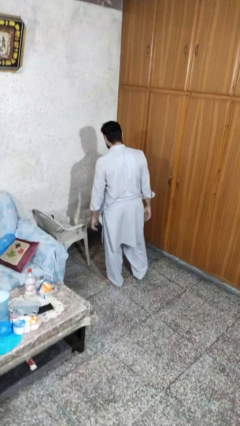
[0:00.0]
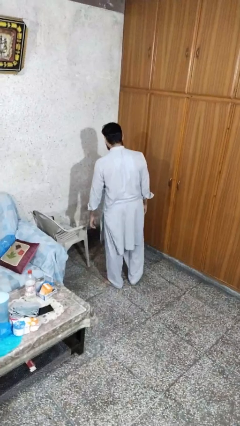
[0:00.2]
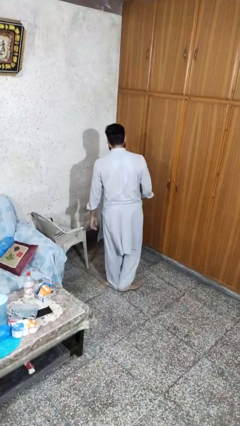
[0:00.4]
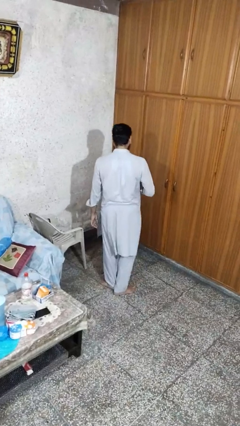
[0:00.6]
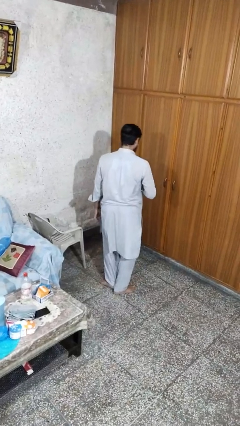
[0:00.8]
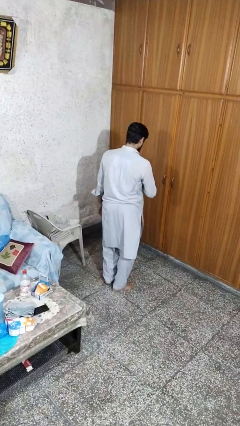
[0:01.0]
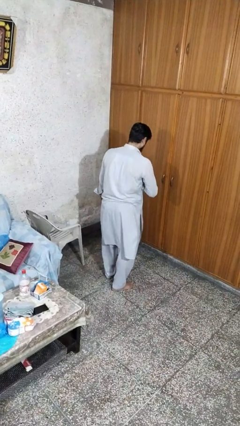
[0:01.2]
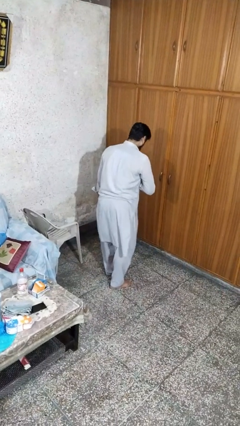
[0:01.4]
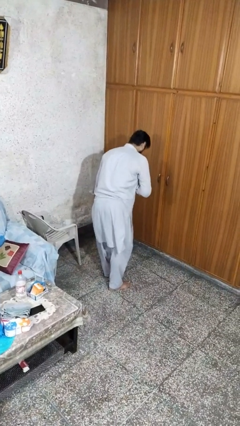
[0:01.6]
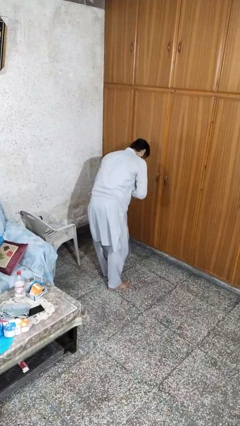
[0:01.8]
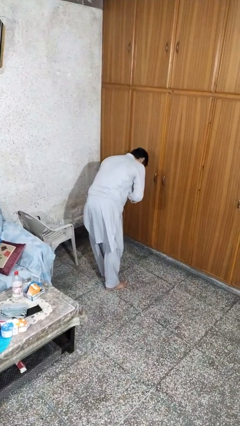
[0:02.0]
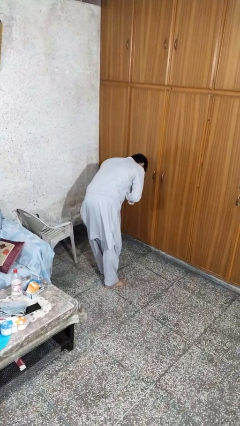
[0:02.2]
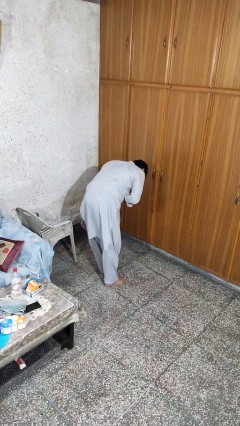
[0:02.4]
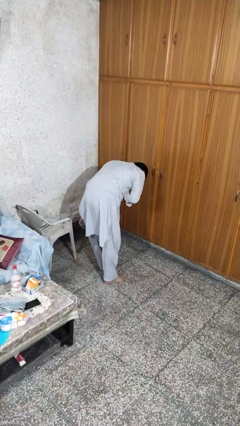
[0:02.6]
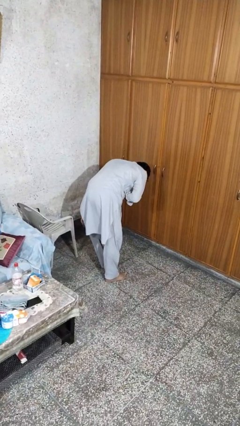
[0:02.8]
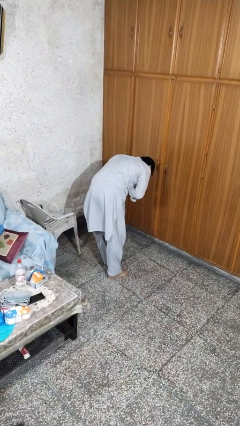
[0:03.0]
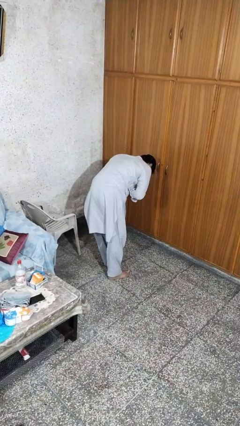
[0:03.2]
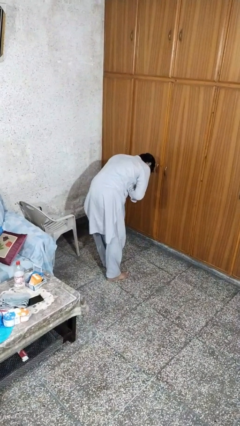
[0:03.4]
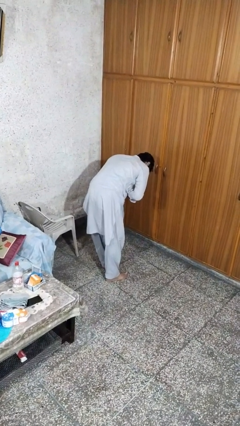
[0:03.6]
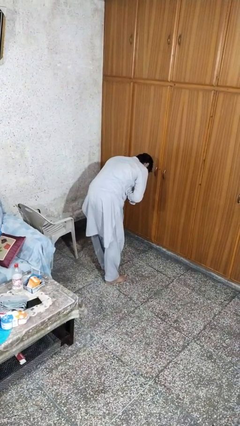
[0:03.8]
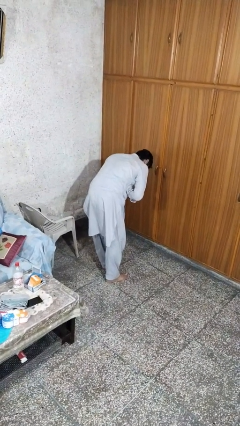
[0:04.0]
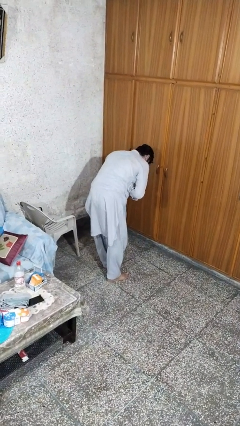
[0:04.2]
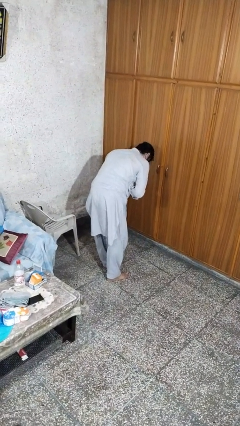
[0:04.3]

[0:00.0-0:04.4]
person bows

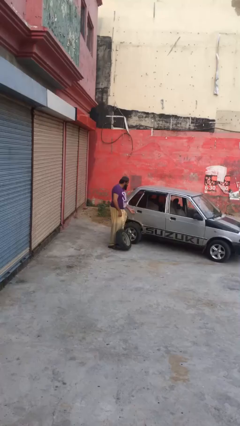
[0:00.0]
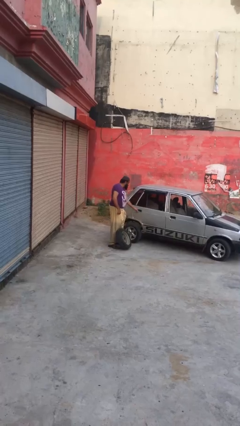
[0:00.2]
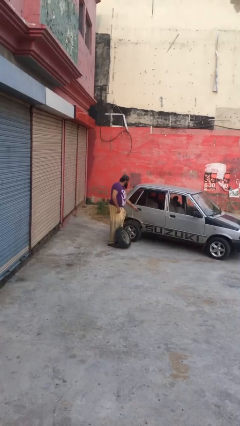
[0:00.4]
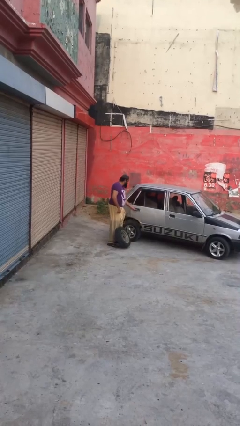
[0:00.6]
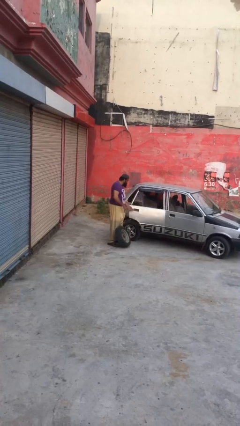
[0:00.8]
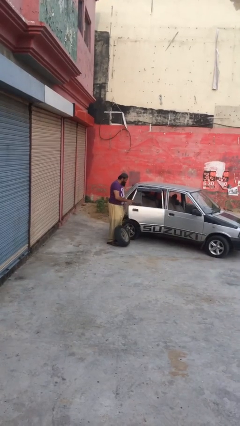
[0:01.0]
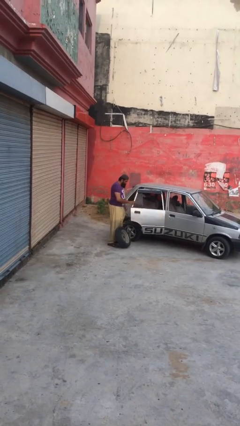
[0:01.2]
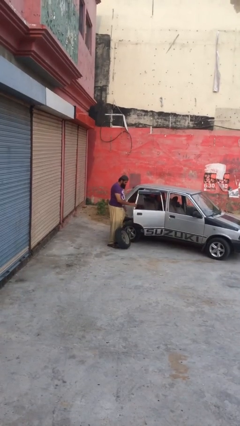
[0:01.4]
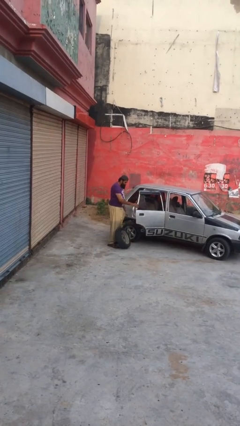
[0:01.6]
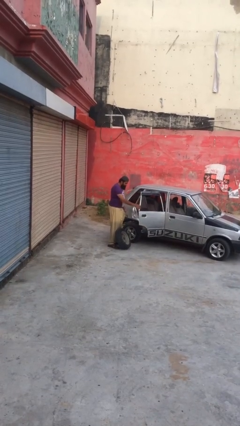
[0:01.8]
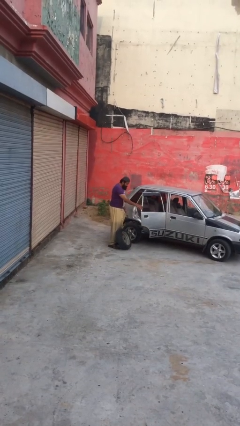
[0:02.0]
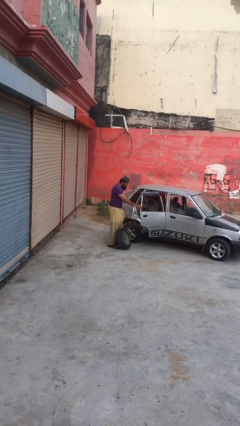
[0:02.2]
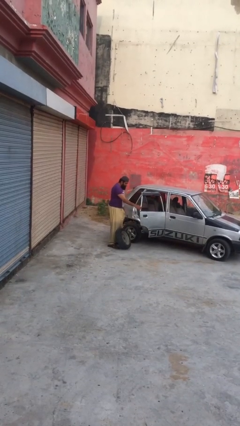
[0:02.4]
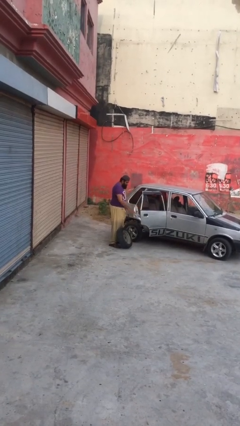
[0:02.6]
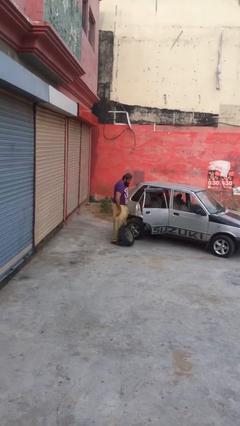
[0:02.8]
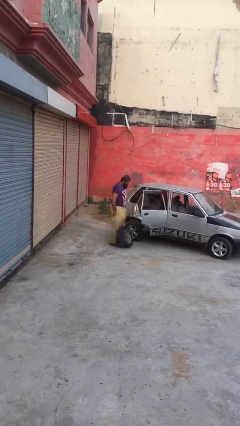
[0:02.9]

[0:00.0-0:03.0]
person opens car door

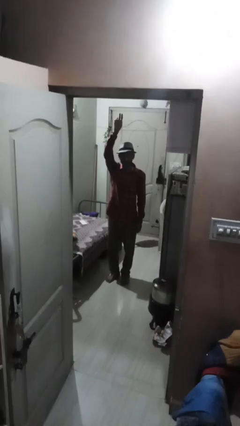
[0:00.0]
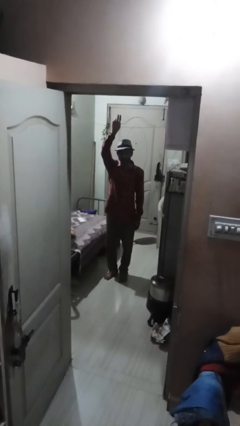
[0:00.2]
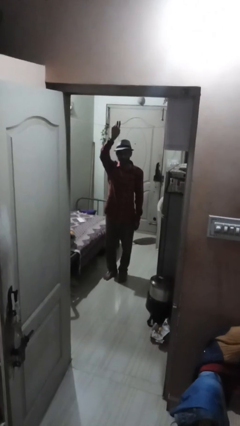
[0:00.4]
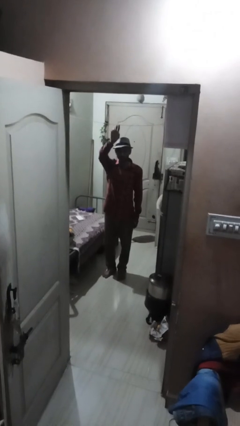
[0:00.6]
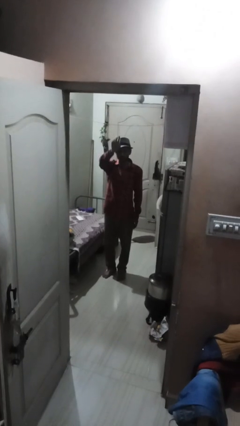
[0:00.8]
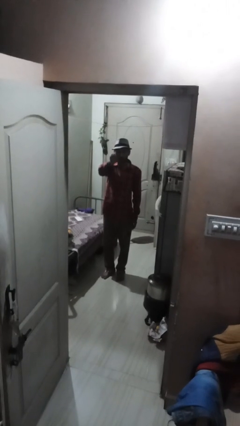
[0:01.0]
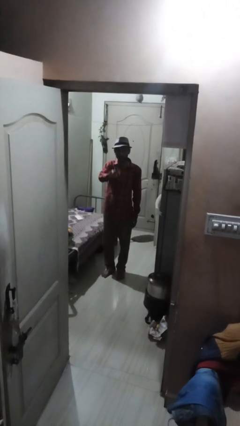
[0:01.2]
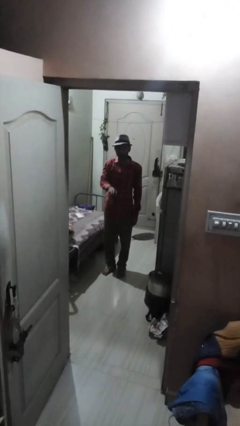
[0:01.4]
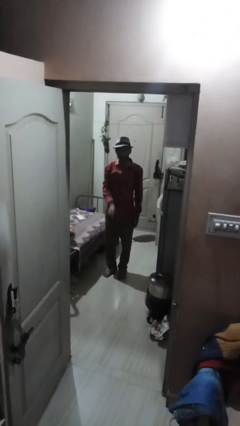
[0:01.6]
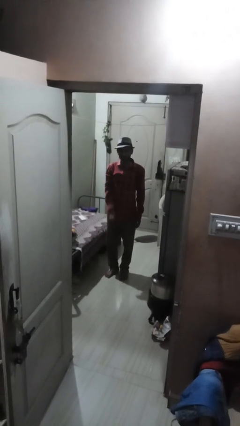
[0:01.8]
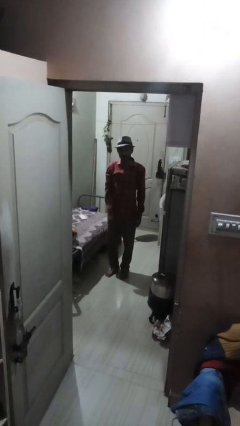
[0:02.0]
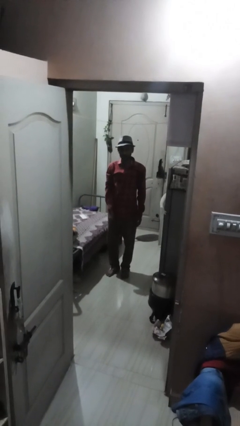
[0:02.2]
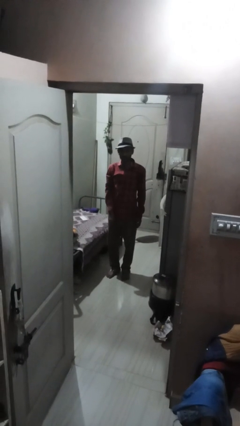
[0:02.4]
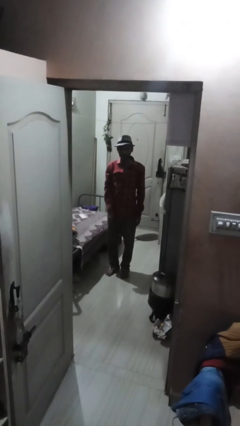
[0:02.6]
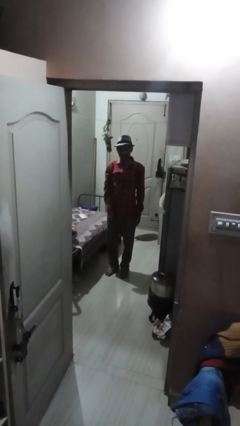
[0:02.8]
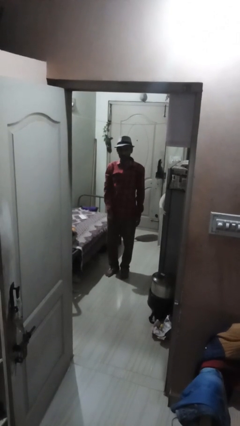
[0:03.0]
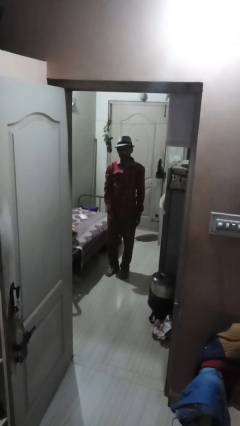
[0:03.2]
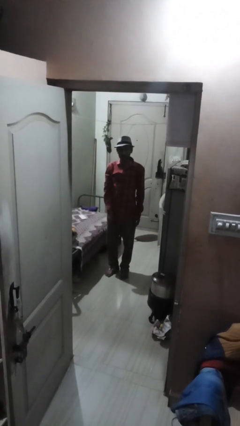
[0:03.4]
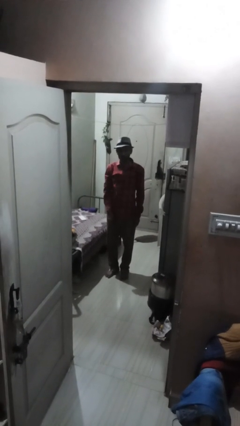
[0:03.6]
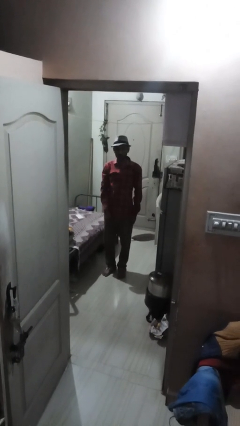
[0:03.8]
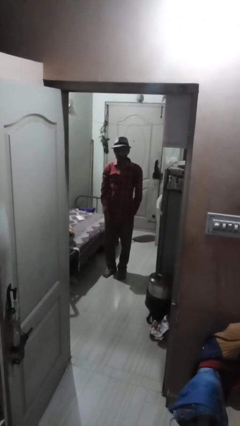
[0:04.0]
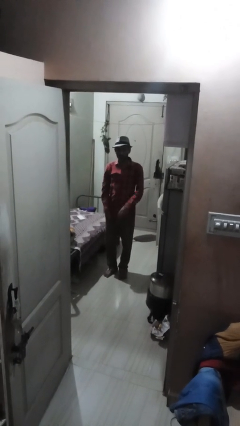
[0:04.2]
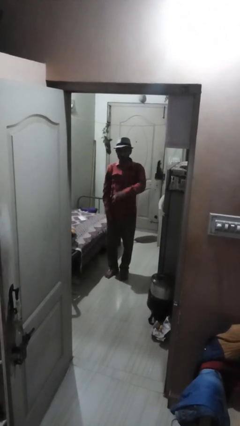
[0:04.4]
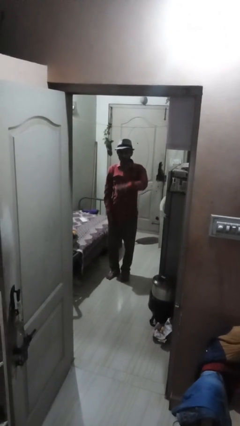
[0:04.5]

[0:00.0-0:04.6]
person gestures swipe down

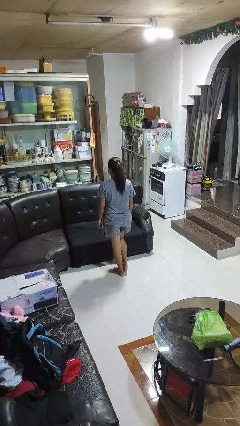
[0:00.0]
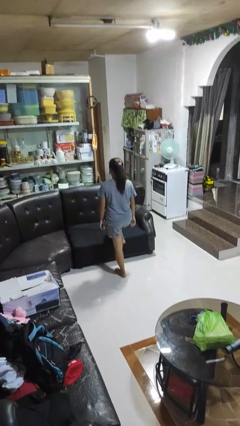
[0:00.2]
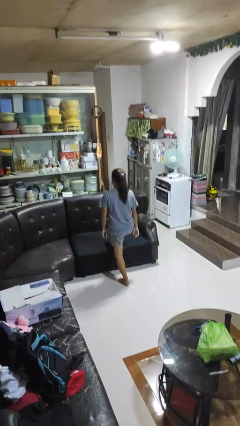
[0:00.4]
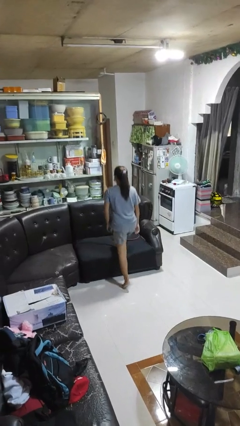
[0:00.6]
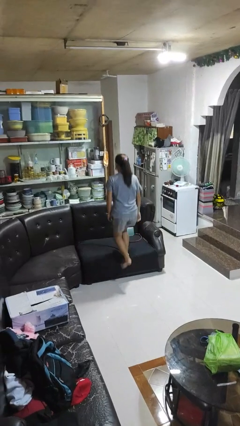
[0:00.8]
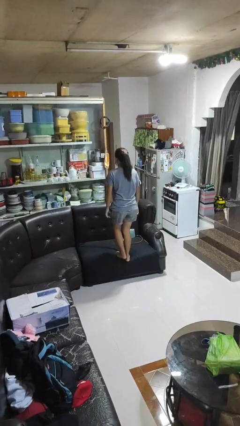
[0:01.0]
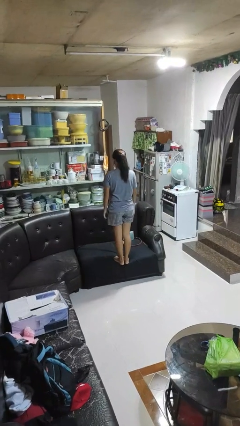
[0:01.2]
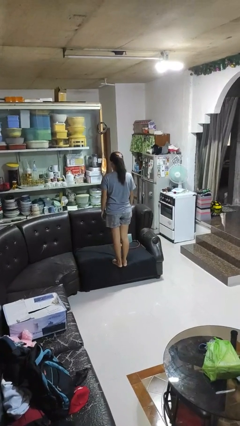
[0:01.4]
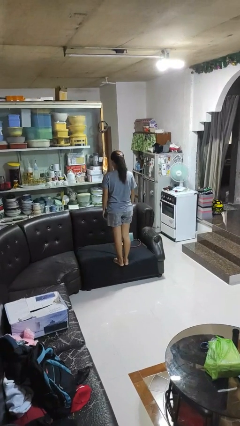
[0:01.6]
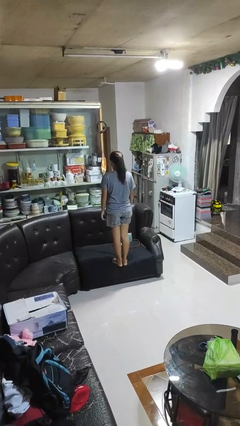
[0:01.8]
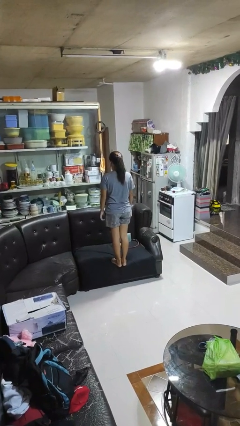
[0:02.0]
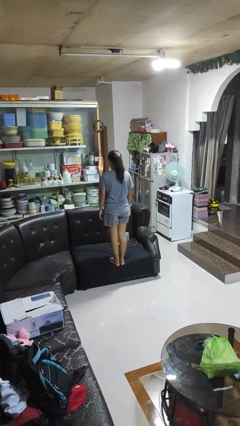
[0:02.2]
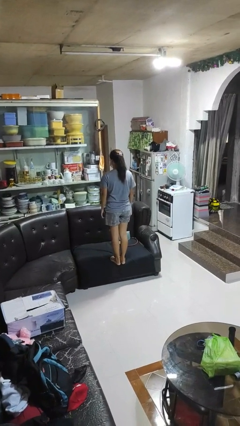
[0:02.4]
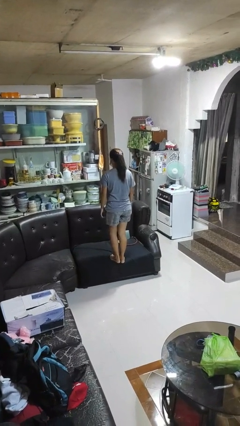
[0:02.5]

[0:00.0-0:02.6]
person climbs on couch

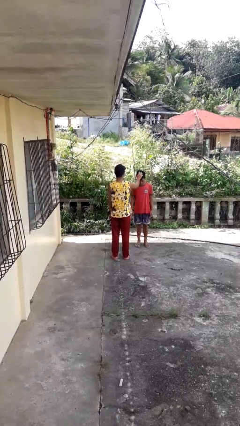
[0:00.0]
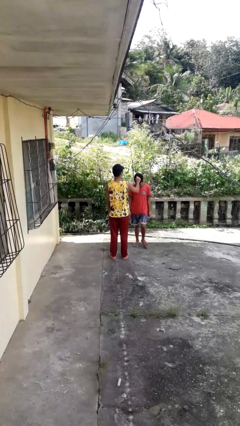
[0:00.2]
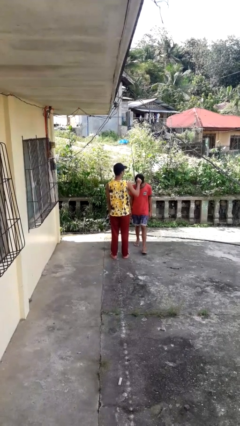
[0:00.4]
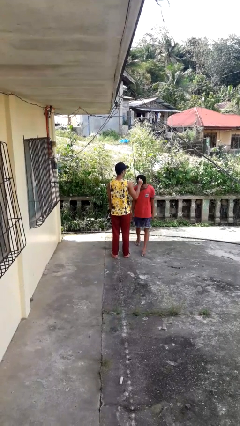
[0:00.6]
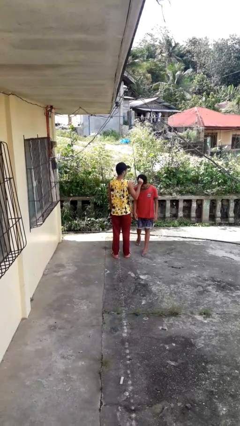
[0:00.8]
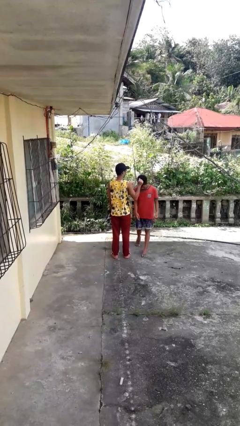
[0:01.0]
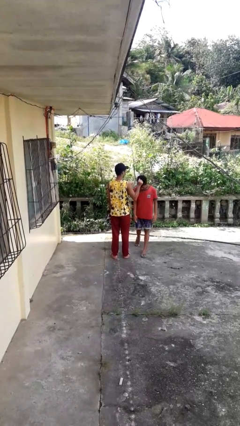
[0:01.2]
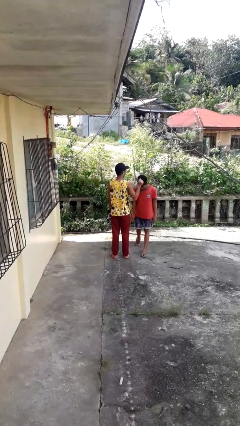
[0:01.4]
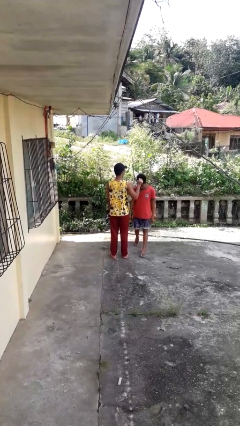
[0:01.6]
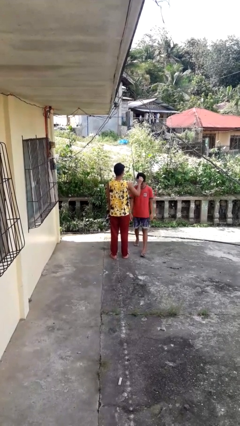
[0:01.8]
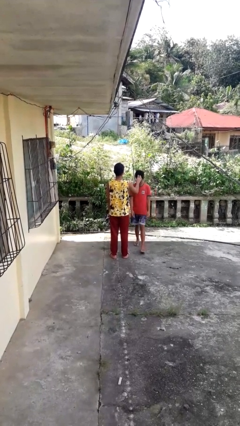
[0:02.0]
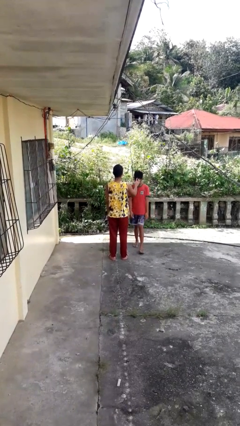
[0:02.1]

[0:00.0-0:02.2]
person grabs person by hair

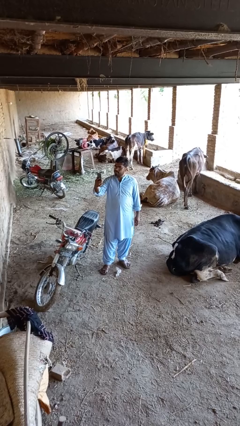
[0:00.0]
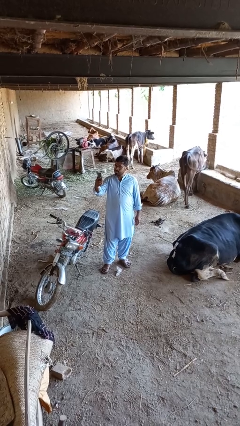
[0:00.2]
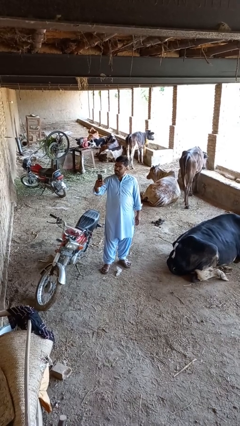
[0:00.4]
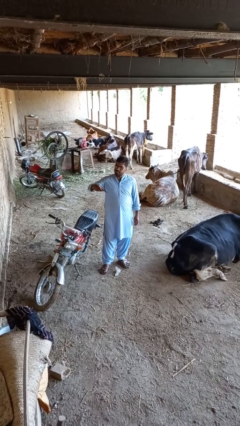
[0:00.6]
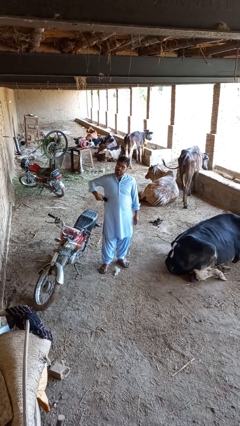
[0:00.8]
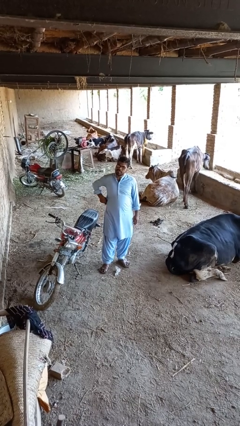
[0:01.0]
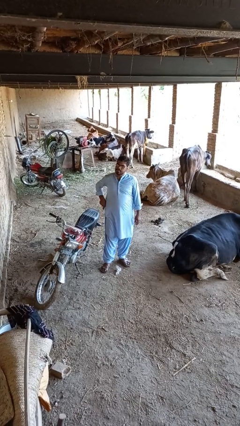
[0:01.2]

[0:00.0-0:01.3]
person puts phone into pocket
